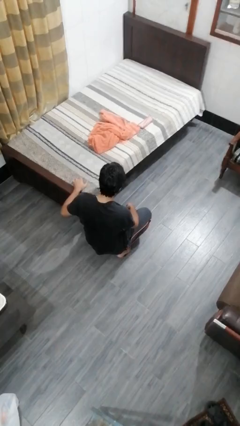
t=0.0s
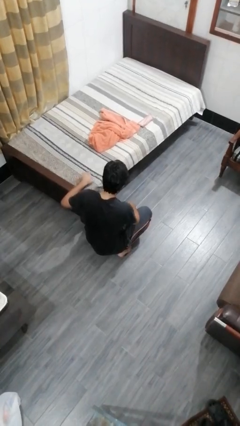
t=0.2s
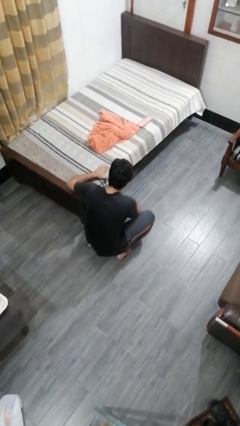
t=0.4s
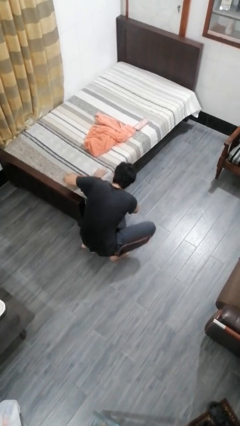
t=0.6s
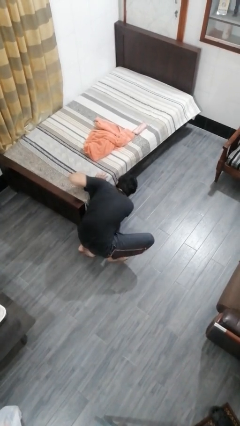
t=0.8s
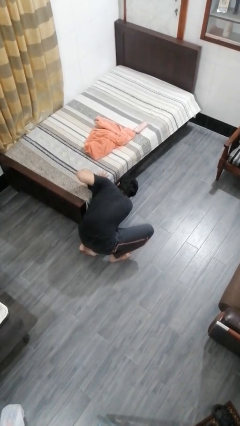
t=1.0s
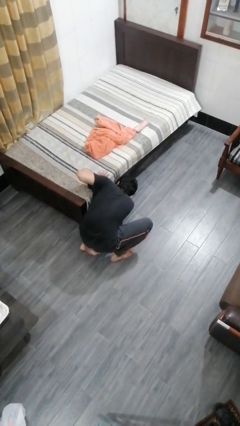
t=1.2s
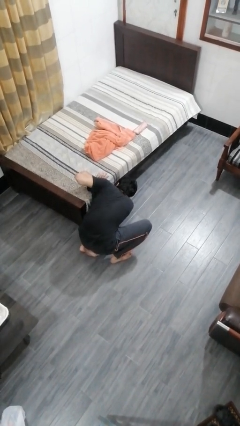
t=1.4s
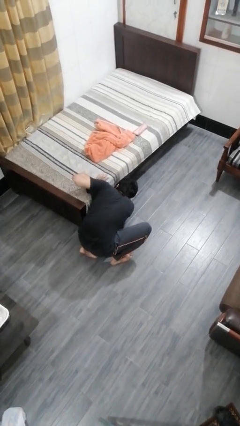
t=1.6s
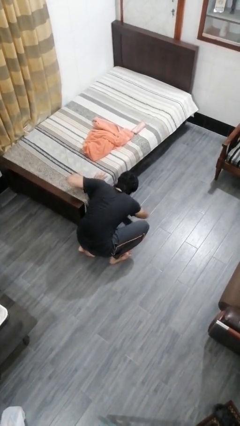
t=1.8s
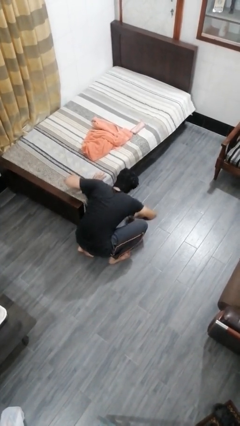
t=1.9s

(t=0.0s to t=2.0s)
person searches under bed

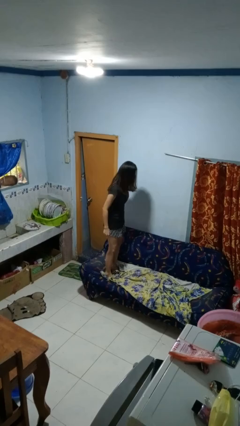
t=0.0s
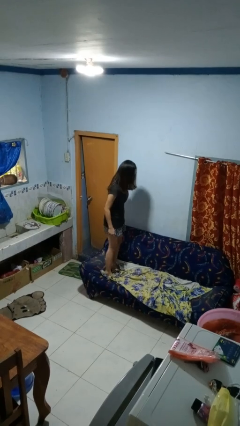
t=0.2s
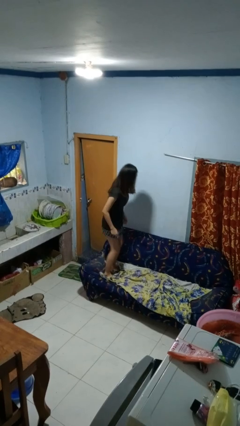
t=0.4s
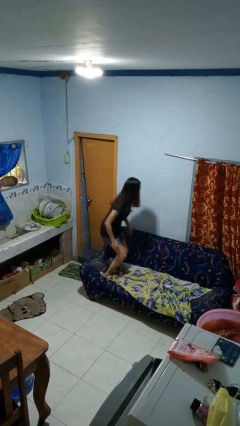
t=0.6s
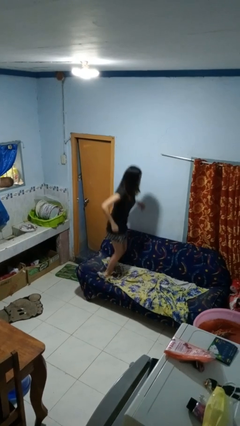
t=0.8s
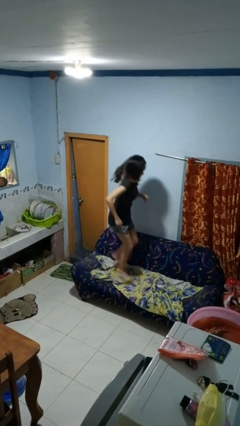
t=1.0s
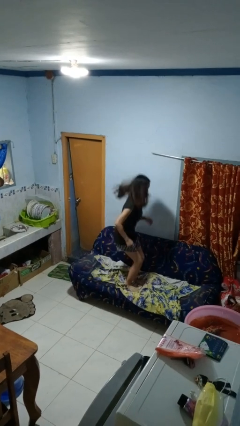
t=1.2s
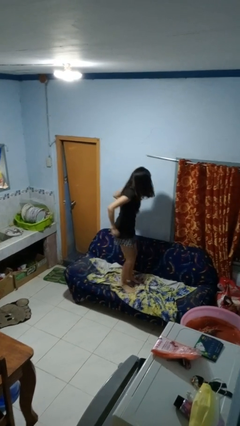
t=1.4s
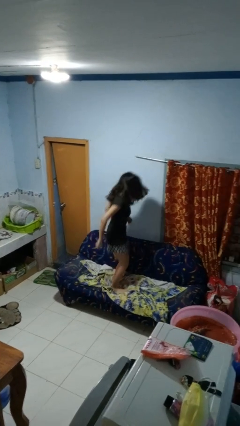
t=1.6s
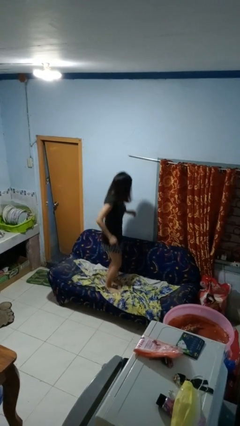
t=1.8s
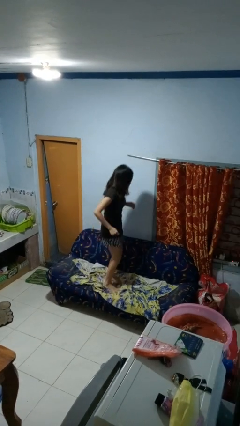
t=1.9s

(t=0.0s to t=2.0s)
person jumps on couch

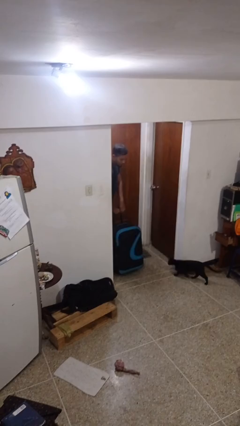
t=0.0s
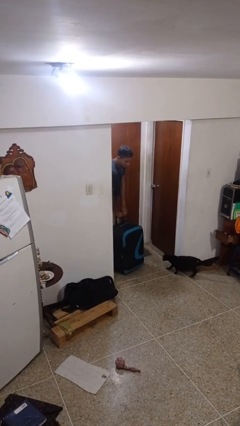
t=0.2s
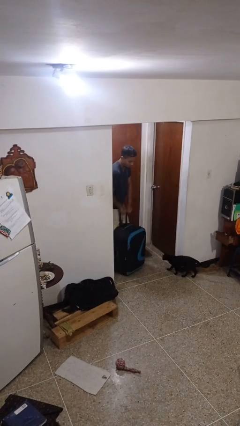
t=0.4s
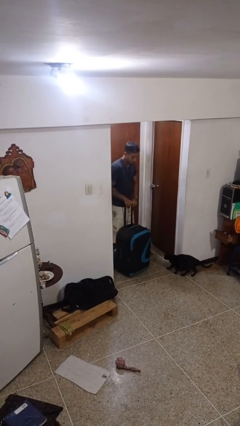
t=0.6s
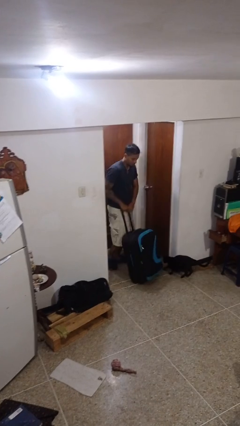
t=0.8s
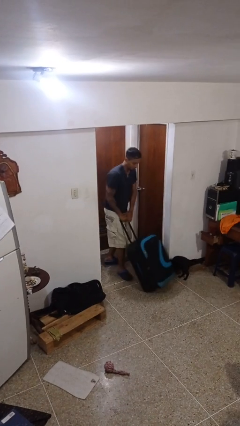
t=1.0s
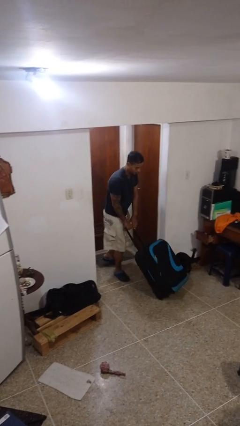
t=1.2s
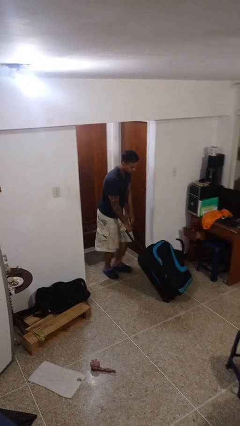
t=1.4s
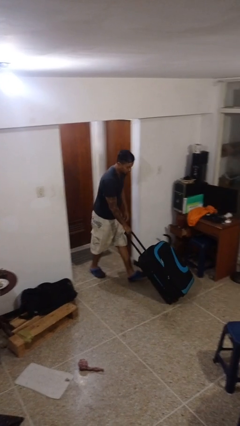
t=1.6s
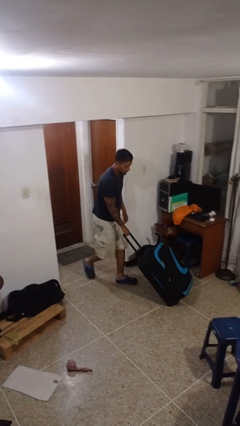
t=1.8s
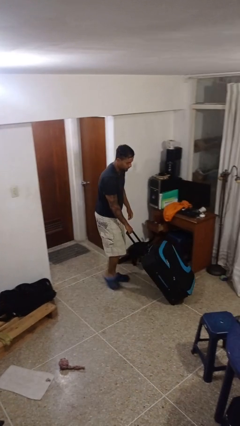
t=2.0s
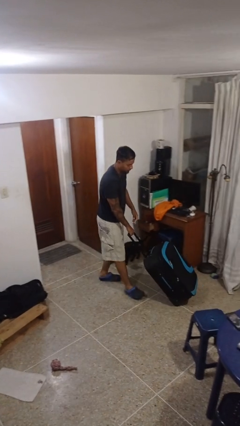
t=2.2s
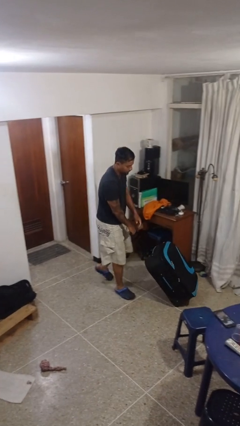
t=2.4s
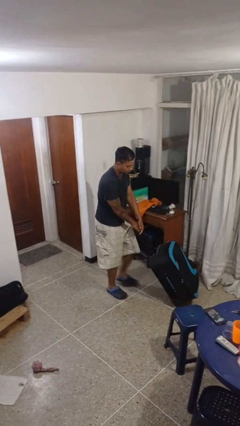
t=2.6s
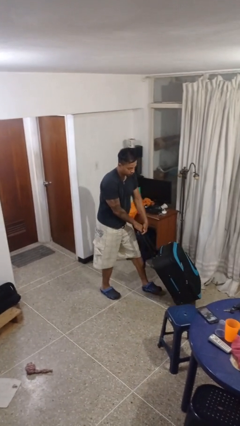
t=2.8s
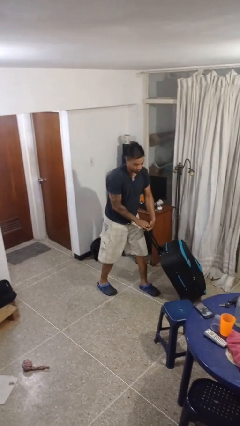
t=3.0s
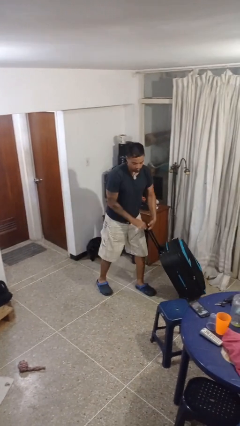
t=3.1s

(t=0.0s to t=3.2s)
person pushes wheeled cart

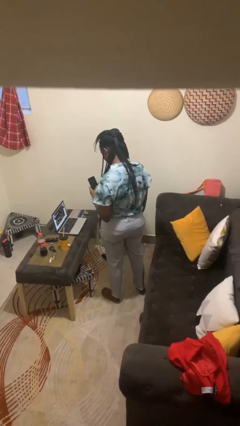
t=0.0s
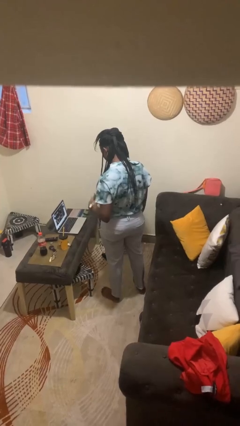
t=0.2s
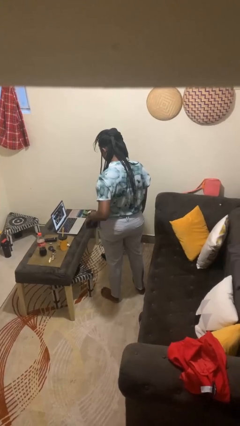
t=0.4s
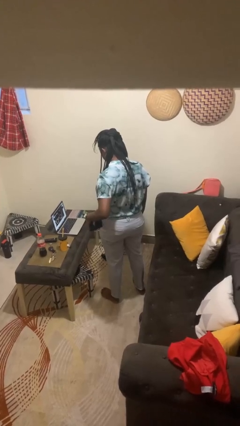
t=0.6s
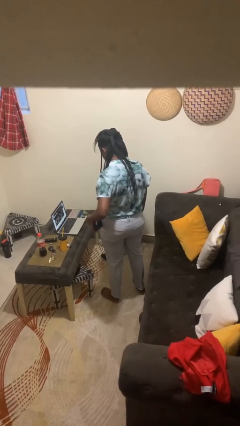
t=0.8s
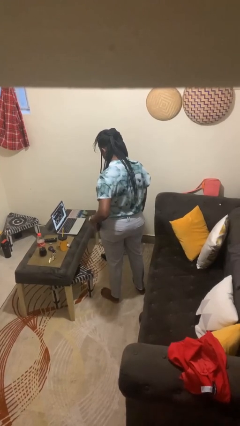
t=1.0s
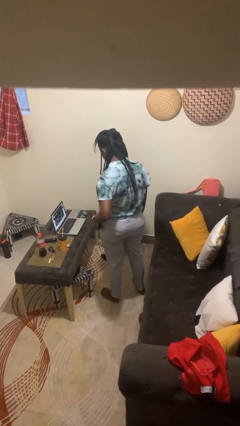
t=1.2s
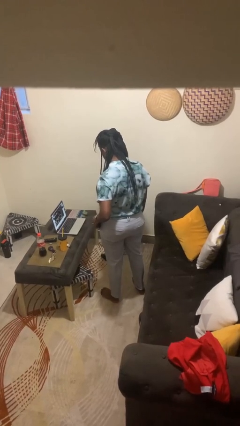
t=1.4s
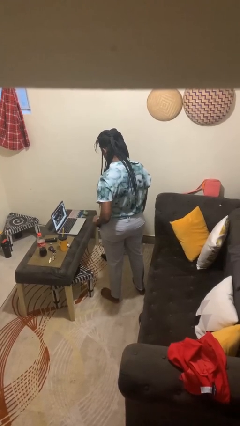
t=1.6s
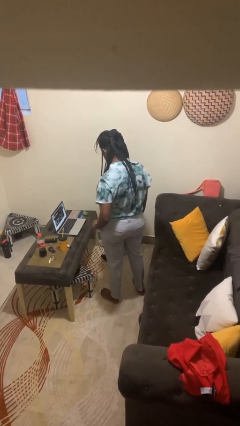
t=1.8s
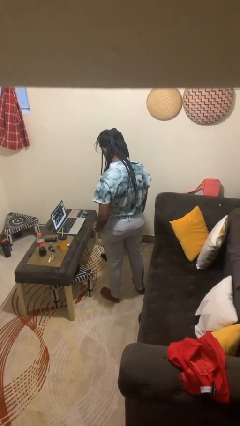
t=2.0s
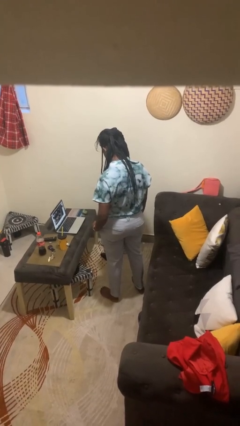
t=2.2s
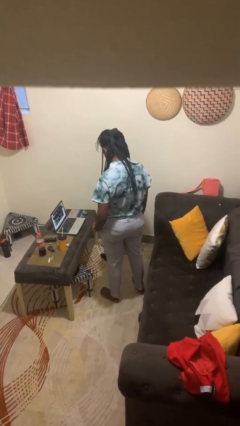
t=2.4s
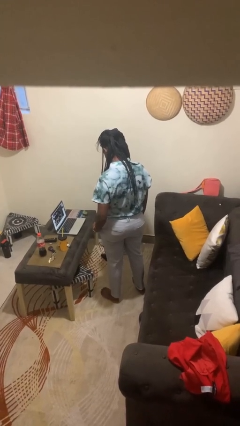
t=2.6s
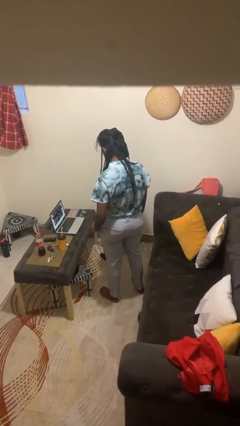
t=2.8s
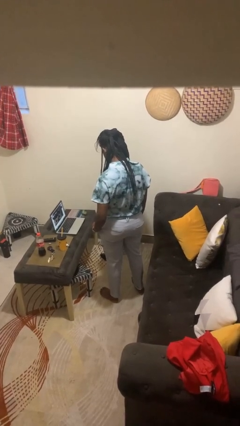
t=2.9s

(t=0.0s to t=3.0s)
person puts phone into pocket

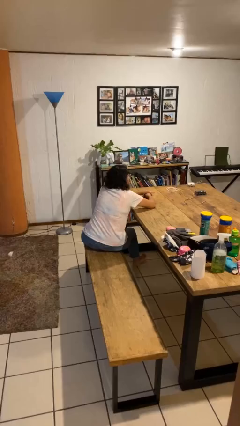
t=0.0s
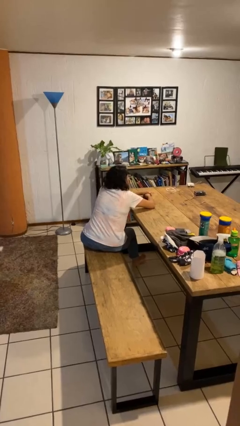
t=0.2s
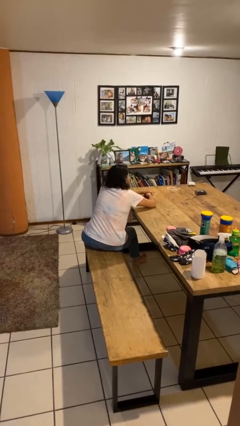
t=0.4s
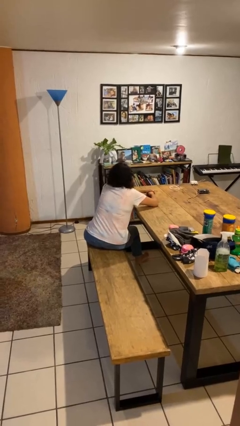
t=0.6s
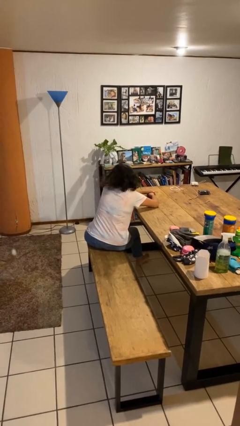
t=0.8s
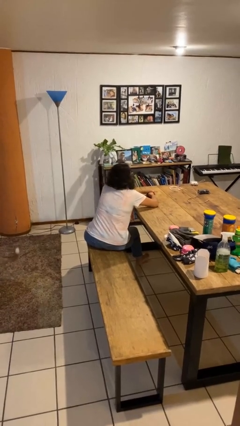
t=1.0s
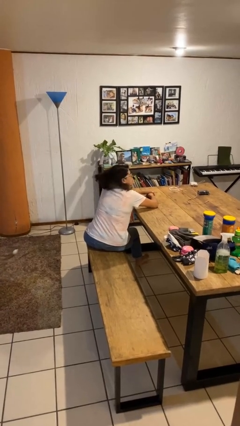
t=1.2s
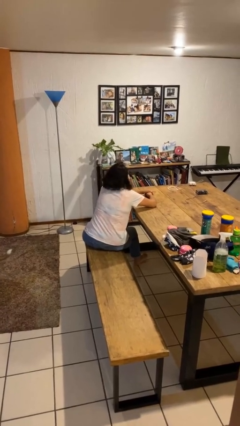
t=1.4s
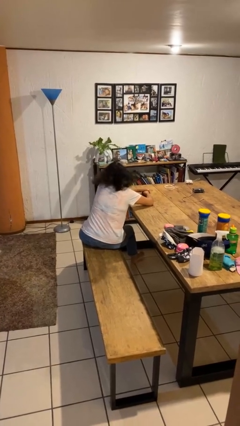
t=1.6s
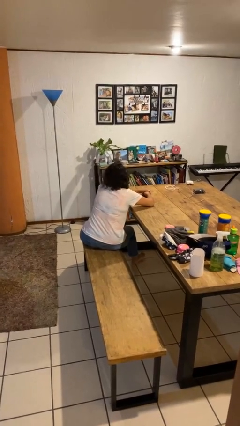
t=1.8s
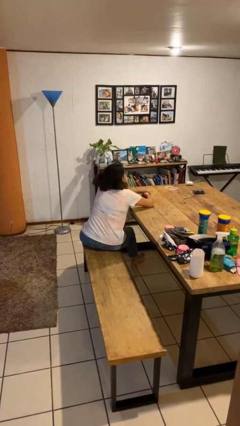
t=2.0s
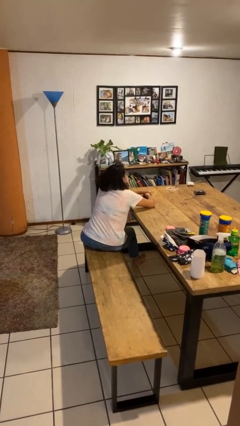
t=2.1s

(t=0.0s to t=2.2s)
person shakes head

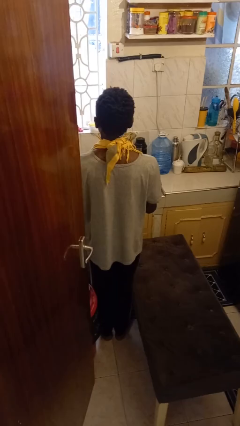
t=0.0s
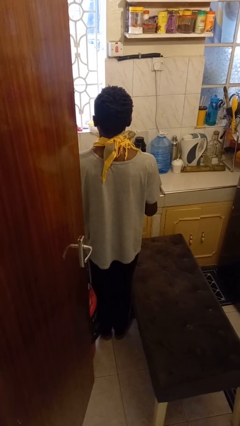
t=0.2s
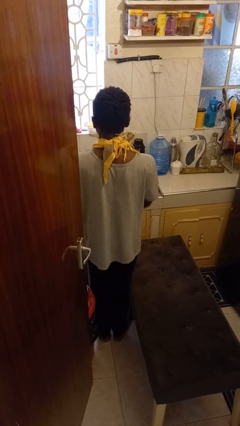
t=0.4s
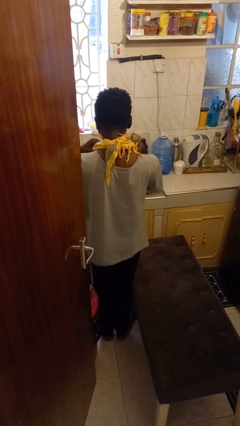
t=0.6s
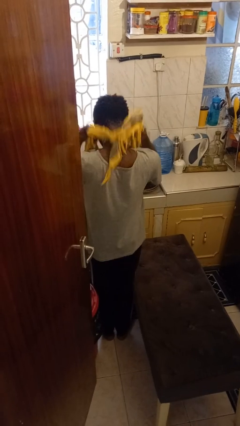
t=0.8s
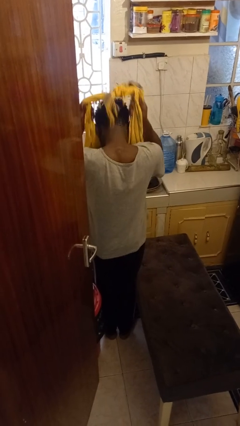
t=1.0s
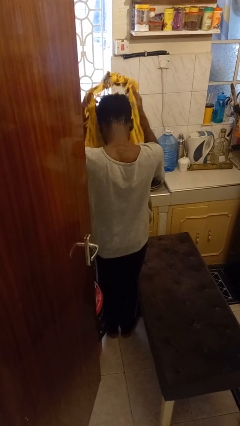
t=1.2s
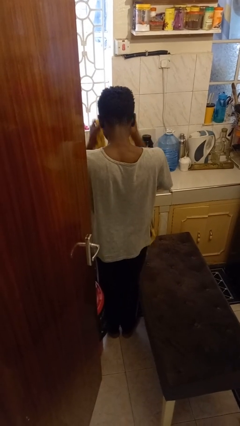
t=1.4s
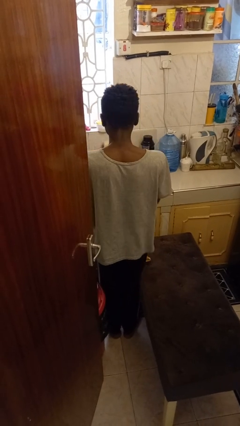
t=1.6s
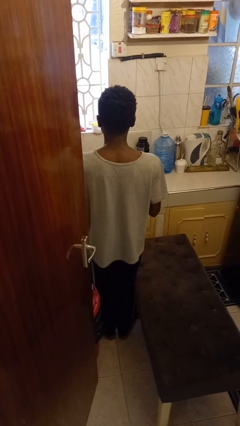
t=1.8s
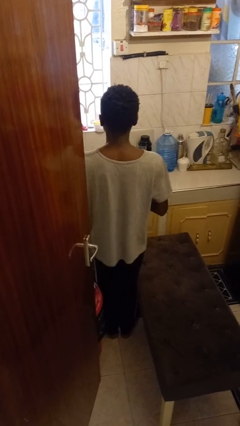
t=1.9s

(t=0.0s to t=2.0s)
person takes off apron

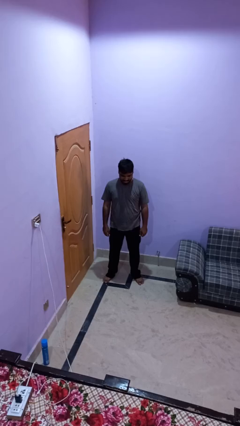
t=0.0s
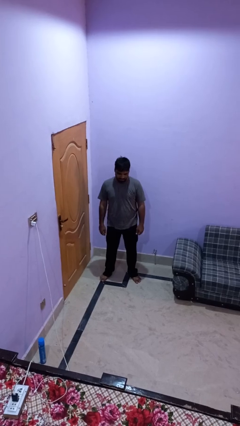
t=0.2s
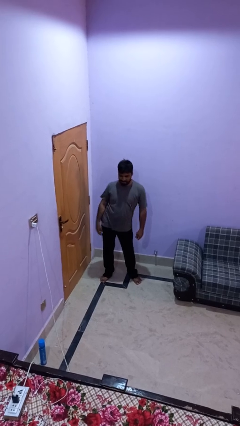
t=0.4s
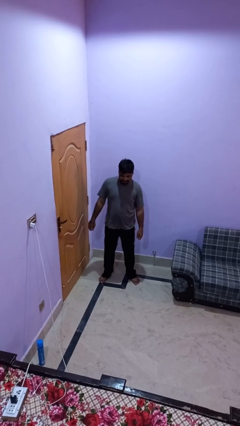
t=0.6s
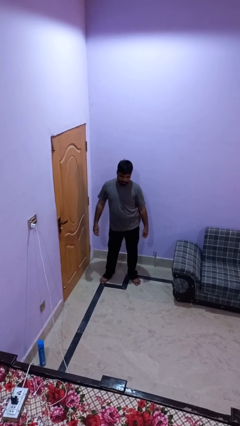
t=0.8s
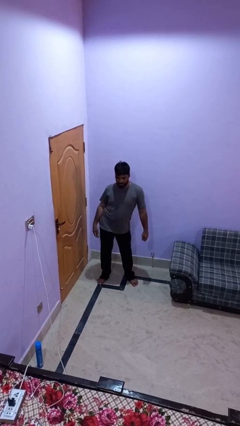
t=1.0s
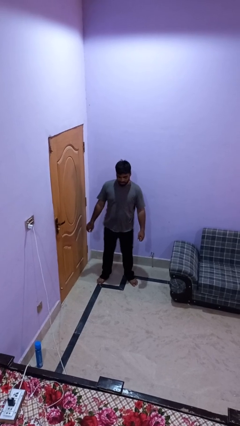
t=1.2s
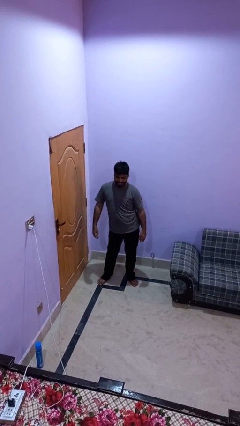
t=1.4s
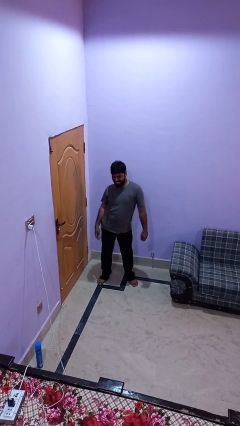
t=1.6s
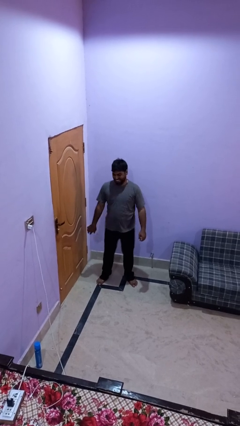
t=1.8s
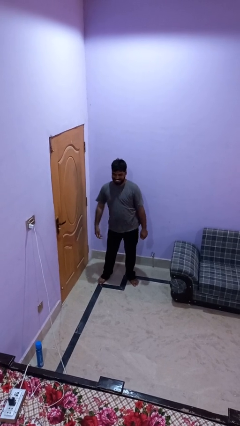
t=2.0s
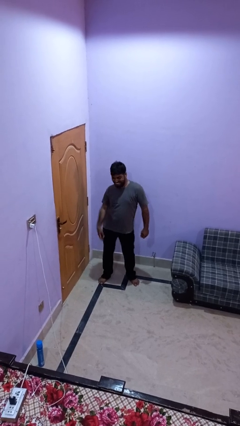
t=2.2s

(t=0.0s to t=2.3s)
person wiggles hips

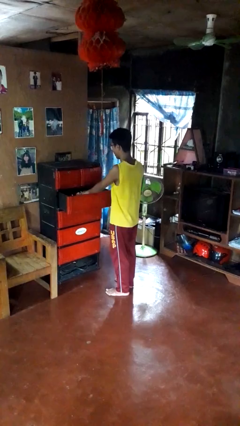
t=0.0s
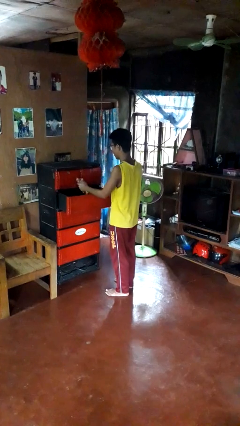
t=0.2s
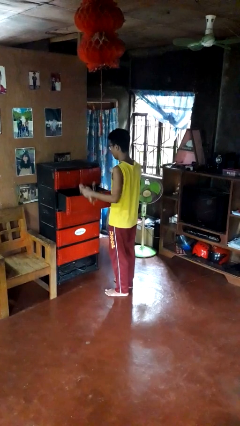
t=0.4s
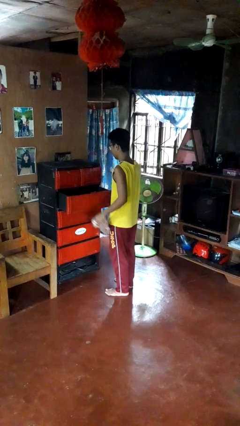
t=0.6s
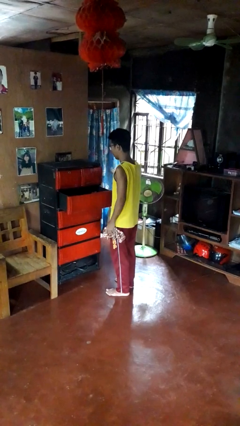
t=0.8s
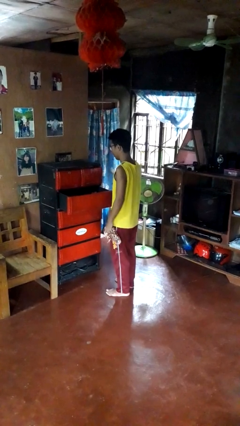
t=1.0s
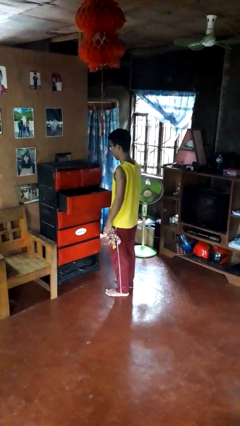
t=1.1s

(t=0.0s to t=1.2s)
person takes clothes from dresser
